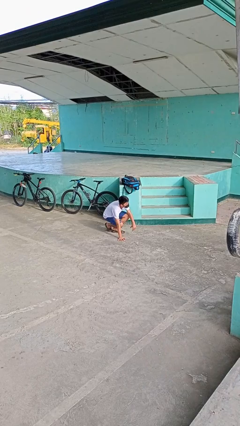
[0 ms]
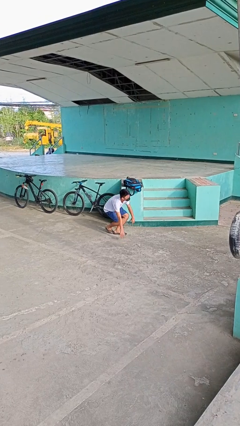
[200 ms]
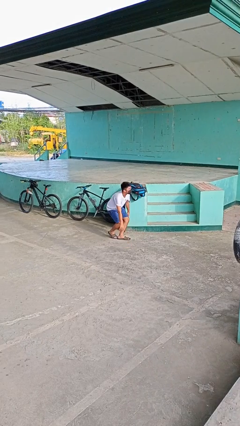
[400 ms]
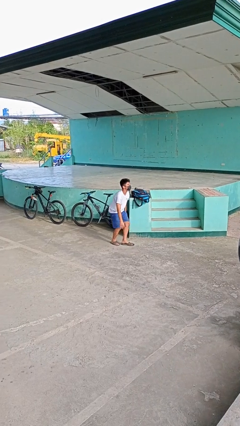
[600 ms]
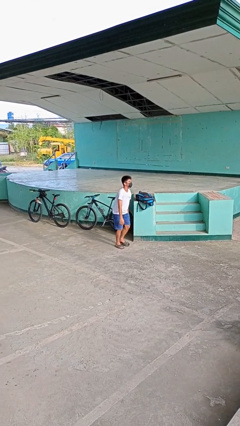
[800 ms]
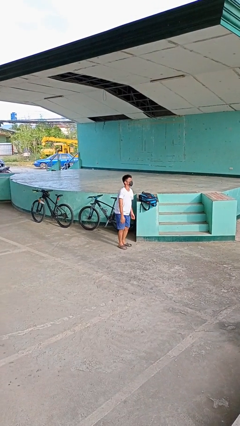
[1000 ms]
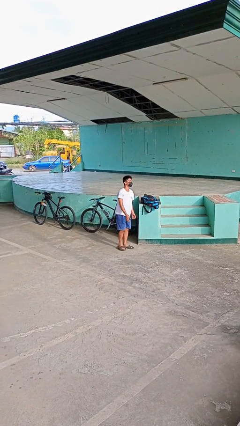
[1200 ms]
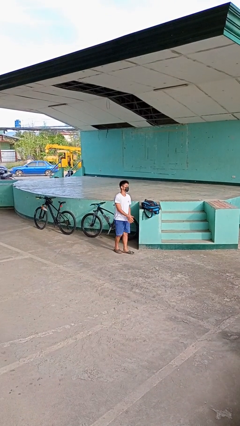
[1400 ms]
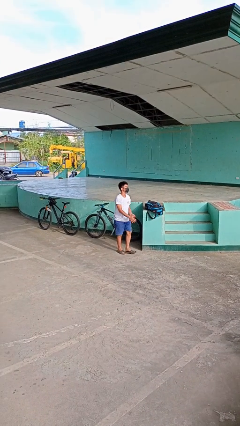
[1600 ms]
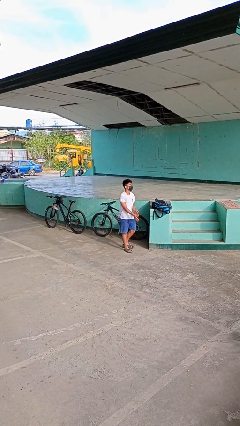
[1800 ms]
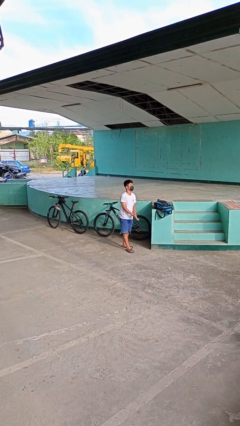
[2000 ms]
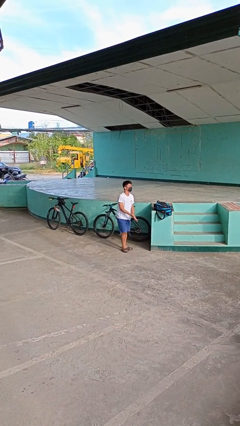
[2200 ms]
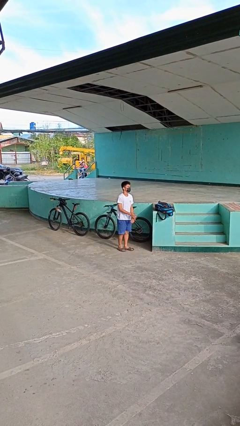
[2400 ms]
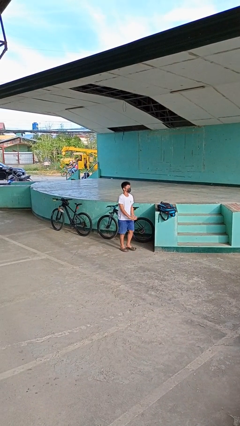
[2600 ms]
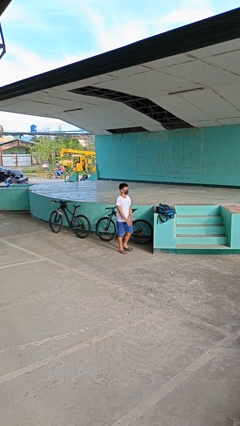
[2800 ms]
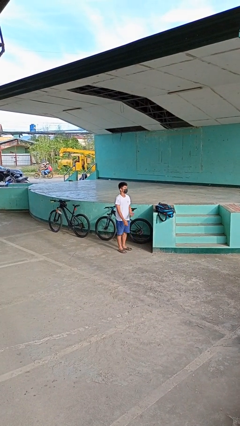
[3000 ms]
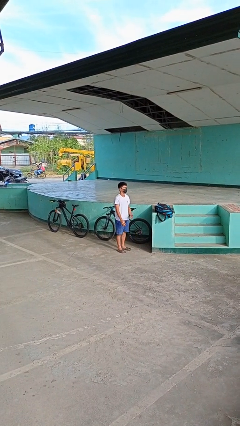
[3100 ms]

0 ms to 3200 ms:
person stands up from floor

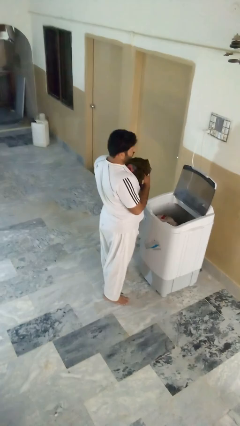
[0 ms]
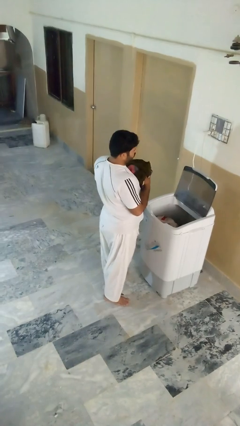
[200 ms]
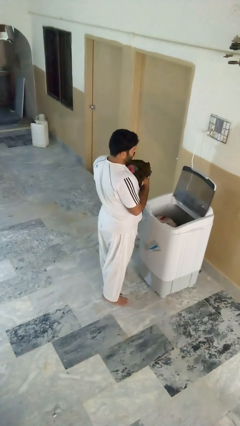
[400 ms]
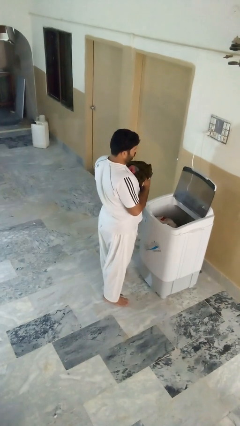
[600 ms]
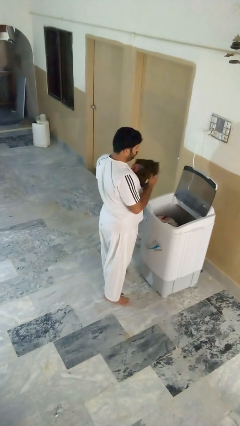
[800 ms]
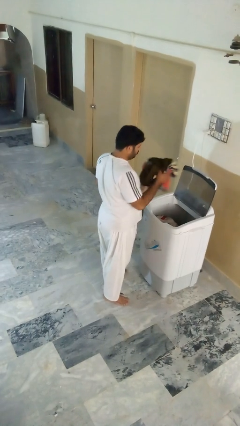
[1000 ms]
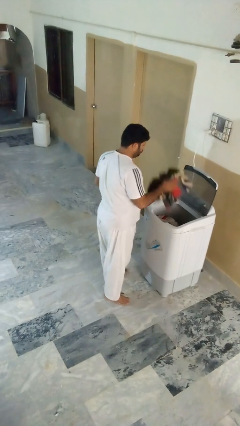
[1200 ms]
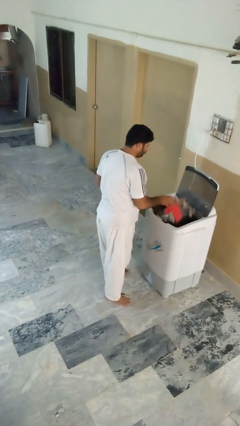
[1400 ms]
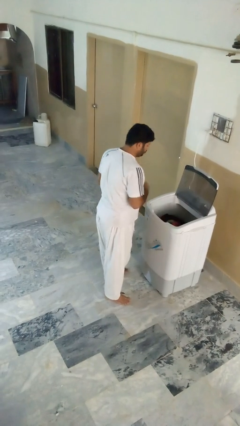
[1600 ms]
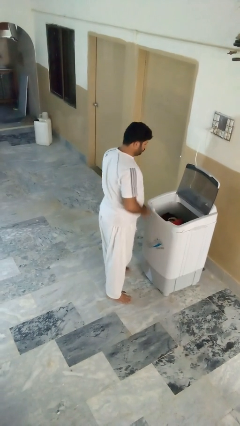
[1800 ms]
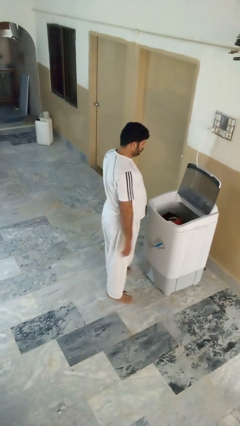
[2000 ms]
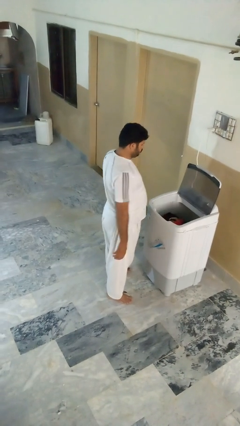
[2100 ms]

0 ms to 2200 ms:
person loads clotheswasher

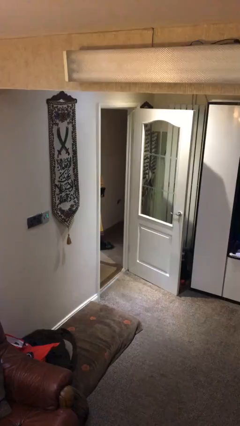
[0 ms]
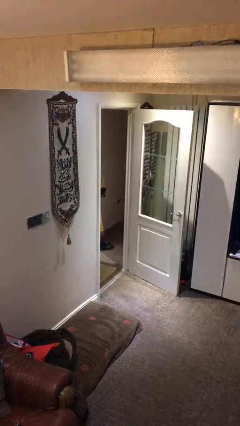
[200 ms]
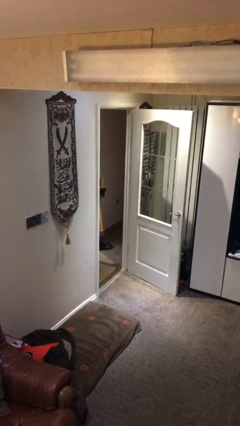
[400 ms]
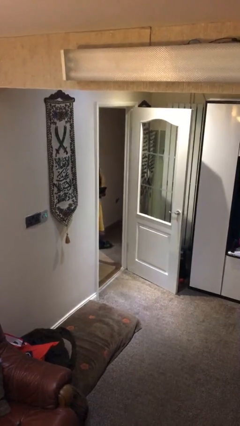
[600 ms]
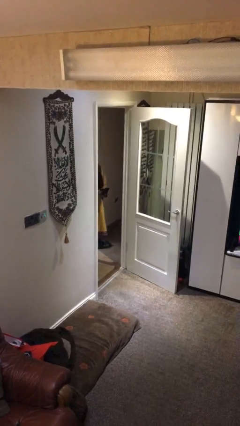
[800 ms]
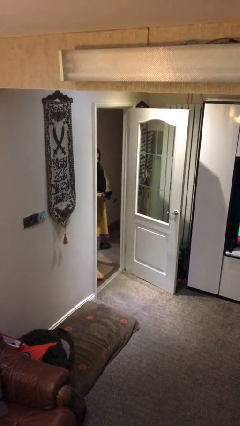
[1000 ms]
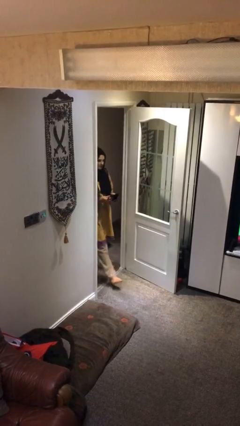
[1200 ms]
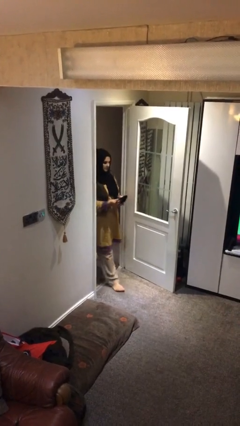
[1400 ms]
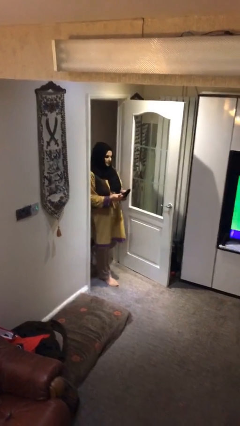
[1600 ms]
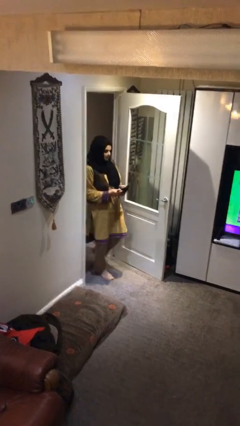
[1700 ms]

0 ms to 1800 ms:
person enters scene through structure

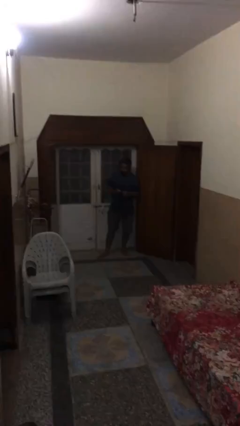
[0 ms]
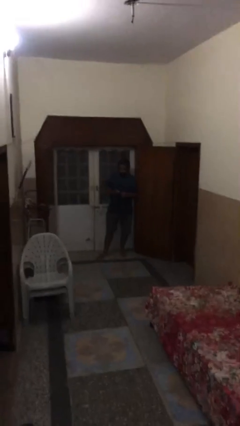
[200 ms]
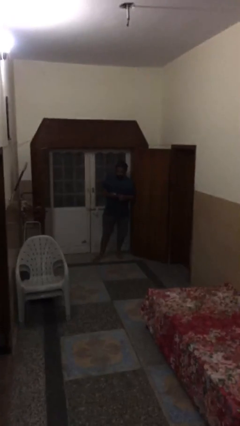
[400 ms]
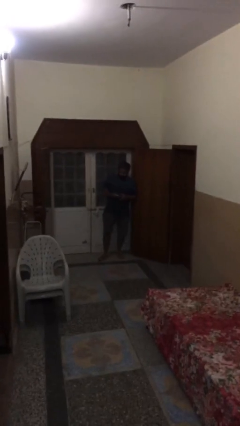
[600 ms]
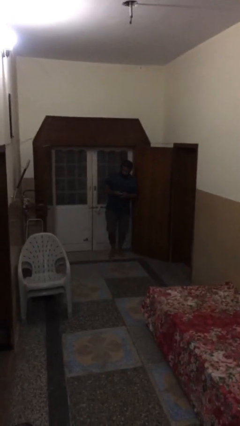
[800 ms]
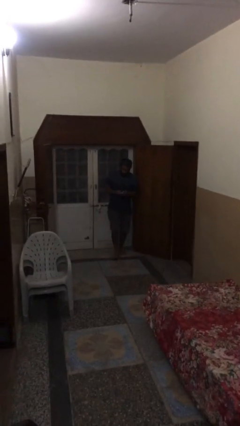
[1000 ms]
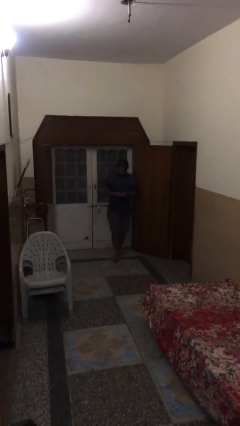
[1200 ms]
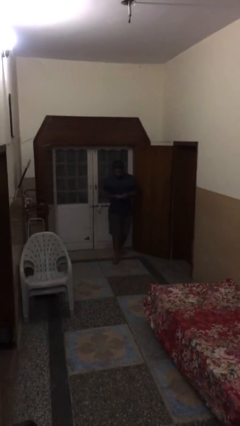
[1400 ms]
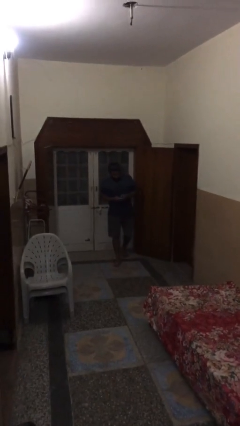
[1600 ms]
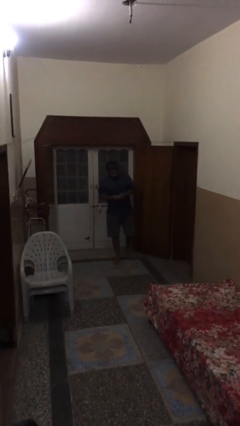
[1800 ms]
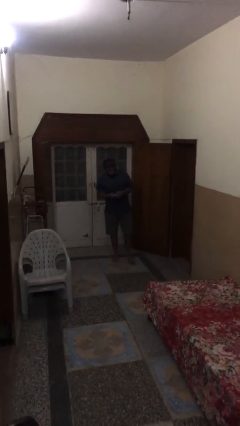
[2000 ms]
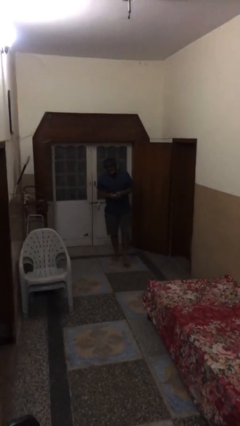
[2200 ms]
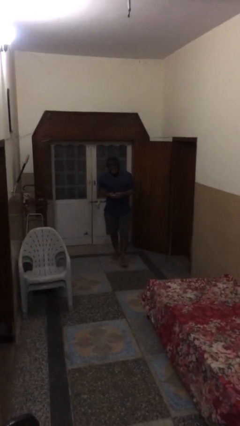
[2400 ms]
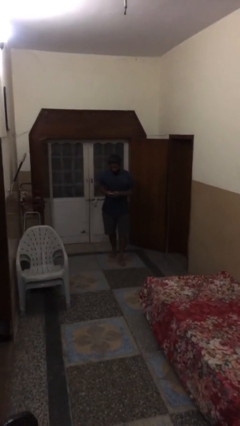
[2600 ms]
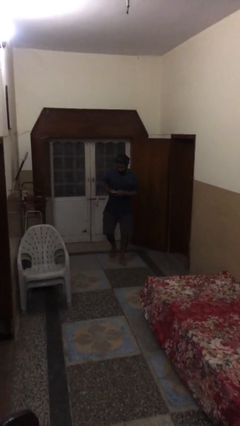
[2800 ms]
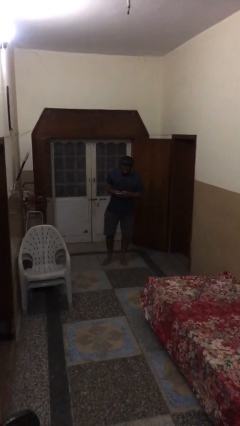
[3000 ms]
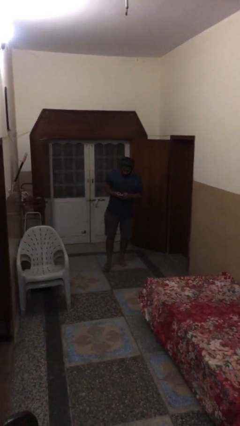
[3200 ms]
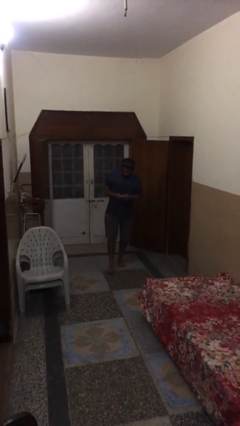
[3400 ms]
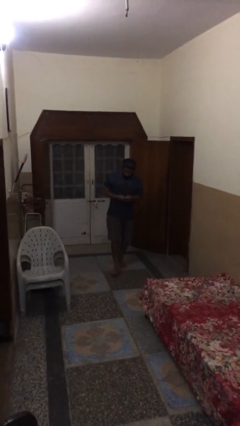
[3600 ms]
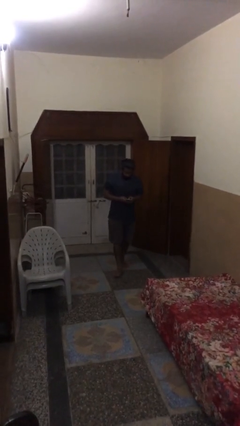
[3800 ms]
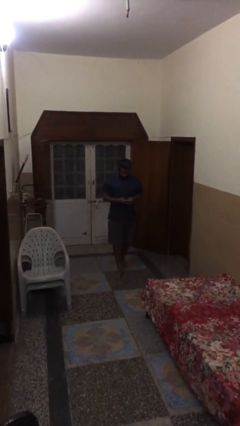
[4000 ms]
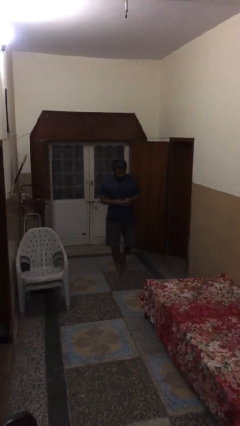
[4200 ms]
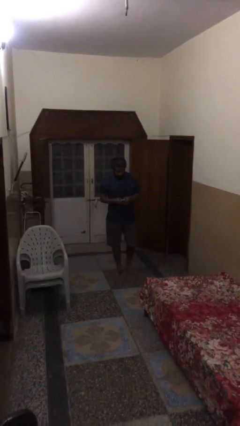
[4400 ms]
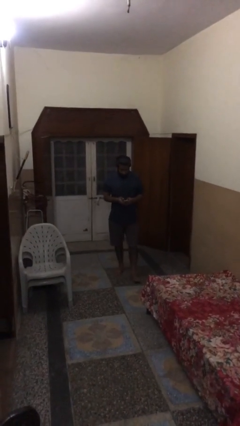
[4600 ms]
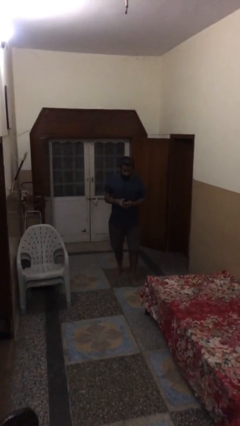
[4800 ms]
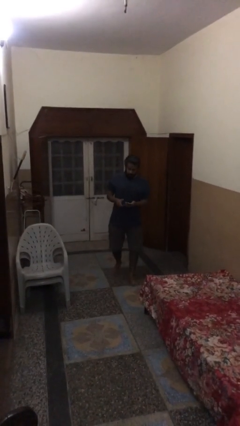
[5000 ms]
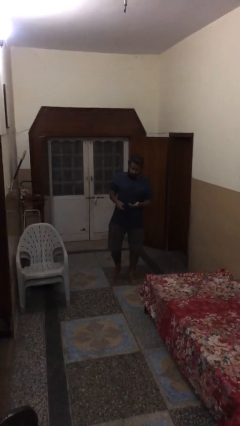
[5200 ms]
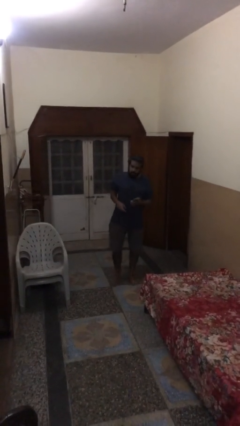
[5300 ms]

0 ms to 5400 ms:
person texts on phone

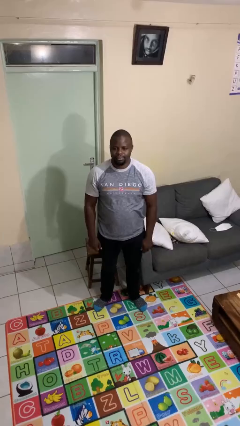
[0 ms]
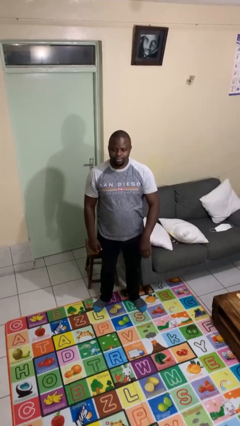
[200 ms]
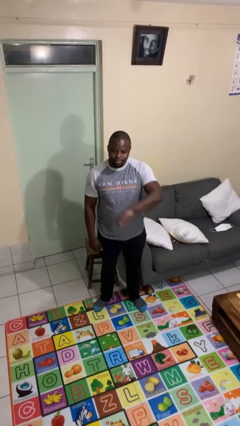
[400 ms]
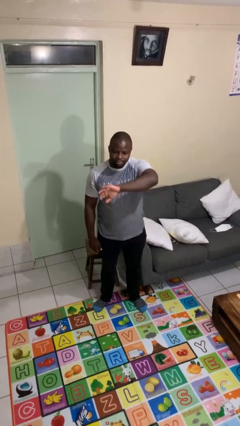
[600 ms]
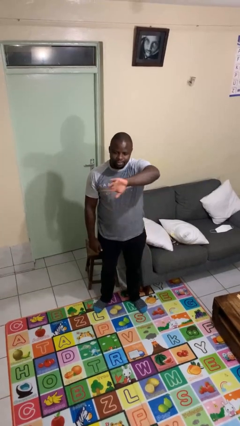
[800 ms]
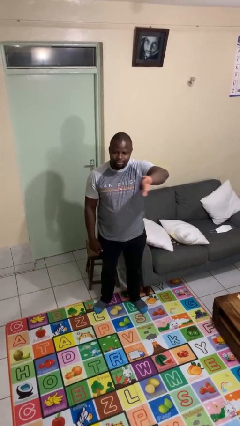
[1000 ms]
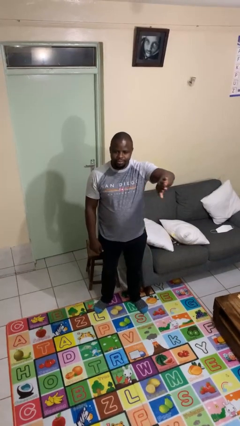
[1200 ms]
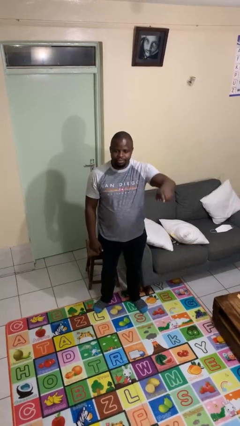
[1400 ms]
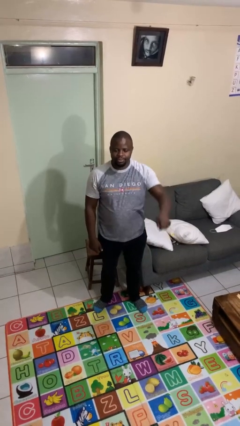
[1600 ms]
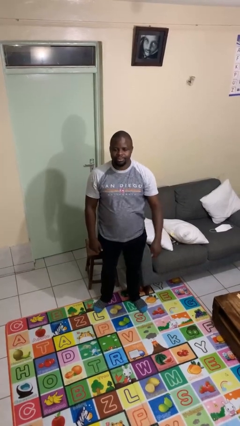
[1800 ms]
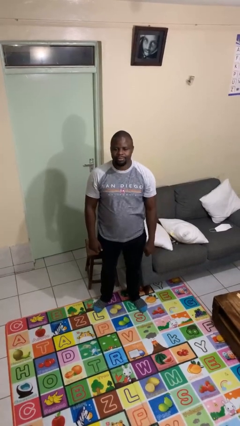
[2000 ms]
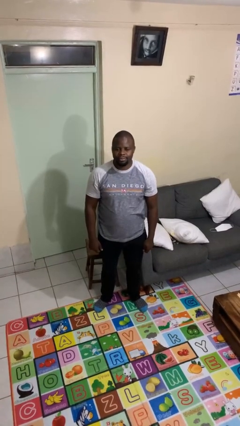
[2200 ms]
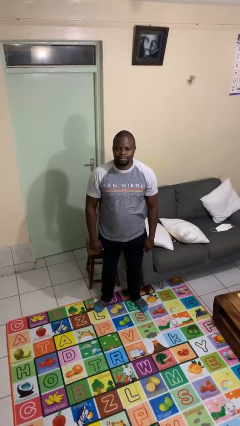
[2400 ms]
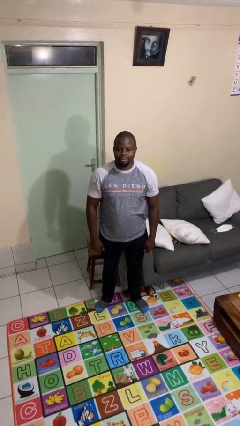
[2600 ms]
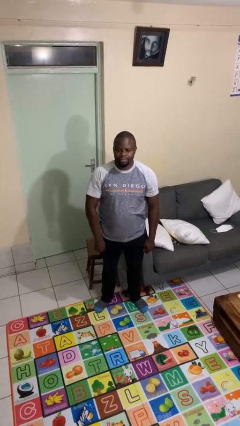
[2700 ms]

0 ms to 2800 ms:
person gestures swipe left

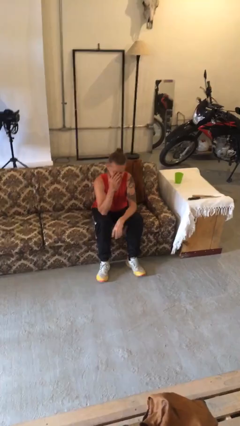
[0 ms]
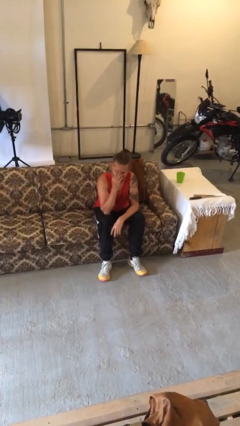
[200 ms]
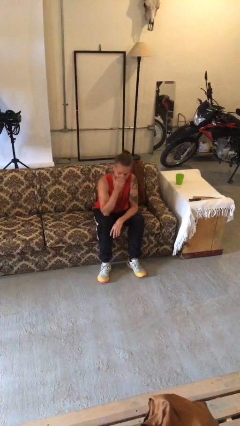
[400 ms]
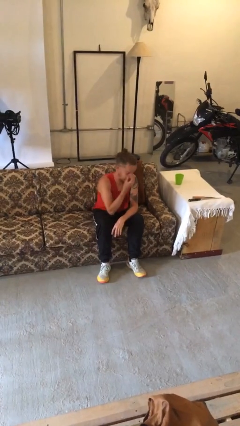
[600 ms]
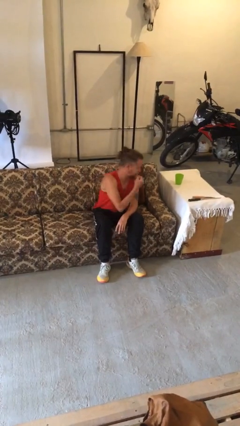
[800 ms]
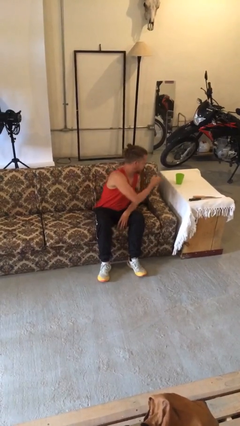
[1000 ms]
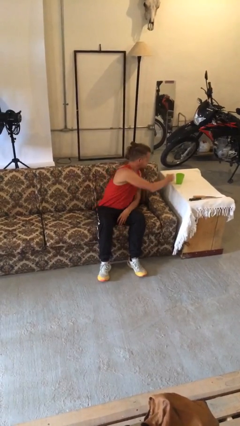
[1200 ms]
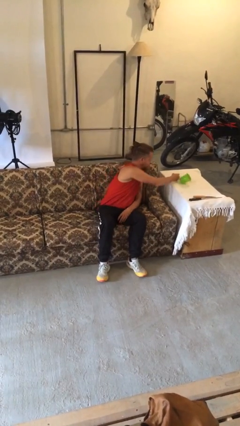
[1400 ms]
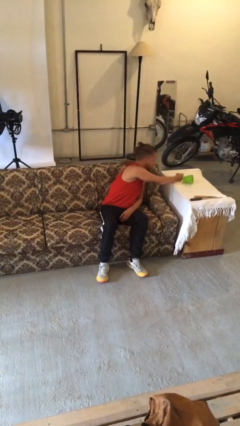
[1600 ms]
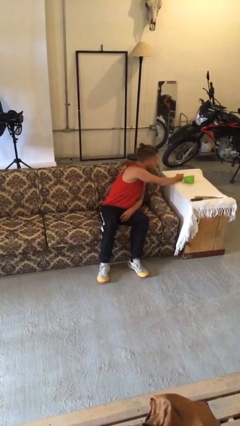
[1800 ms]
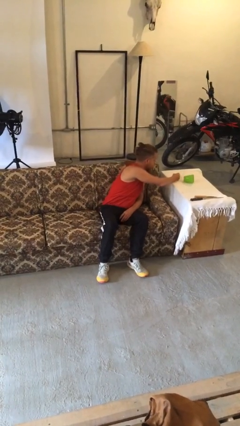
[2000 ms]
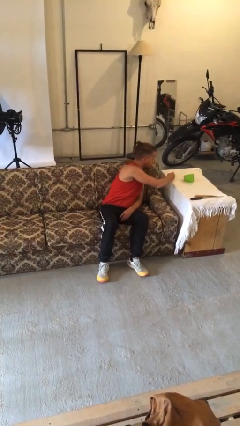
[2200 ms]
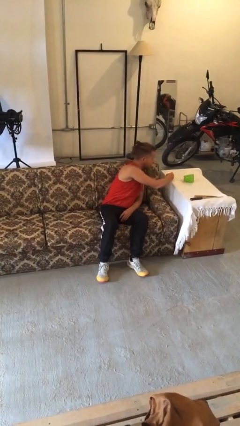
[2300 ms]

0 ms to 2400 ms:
person knocks over glass

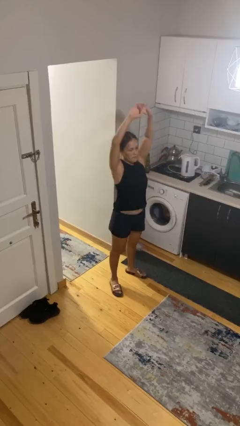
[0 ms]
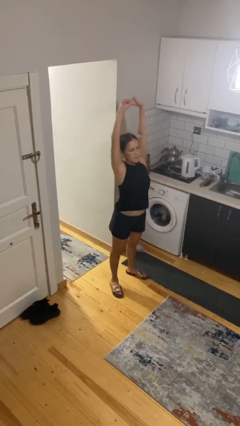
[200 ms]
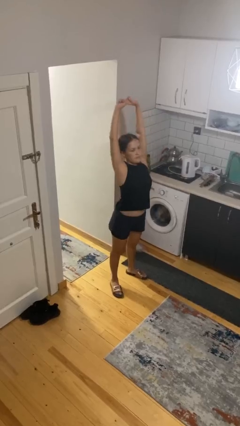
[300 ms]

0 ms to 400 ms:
person stretches arms over head
